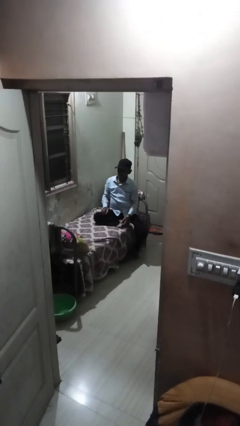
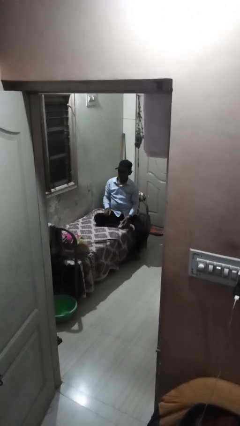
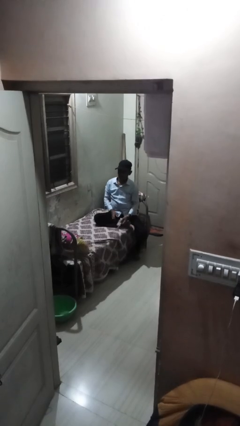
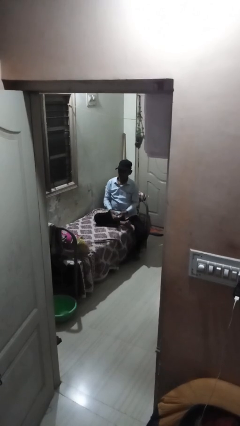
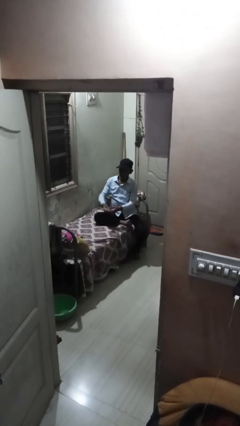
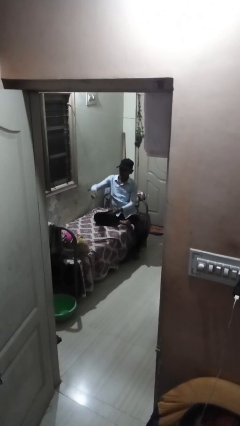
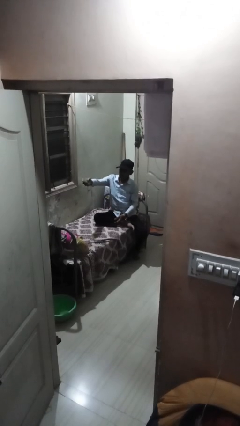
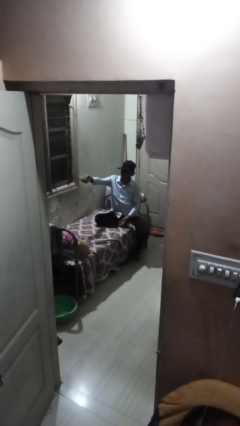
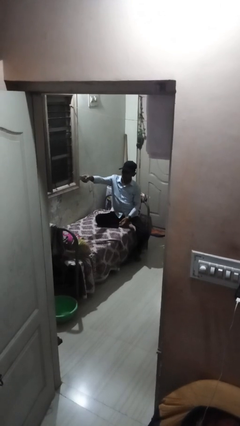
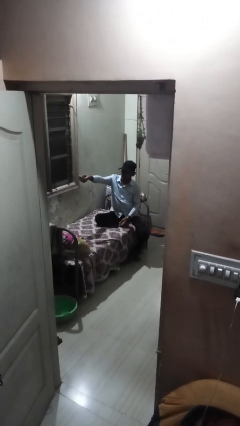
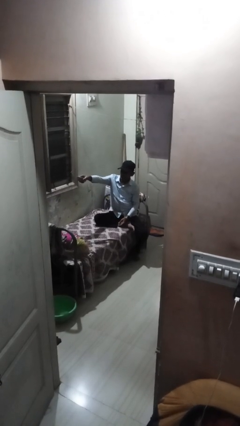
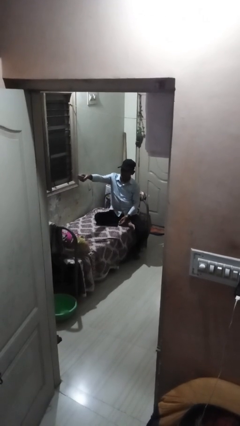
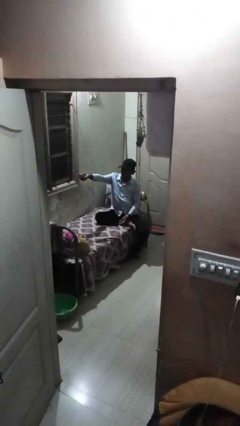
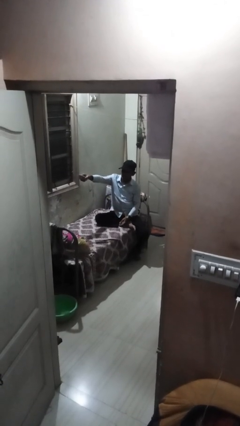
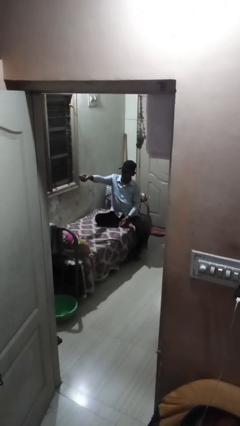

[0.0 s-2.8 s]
person uses television remote

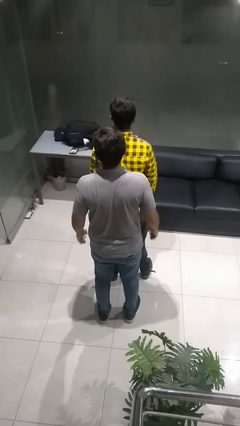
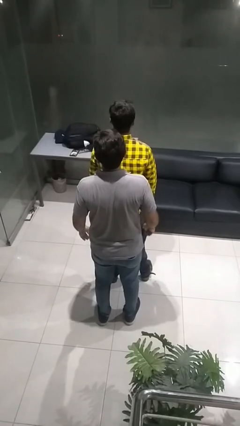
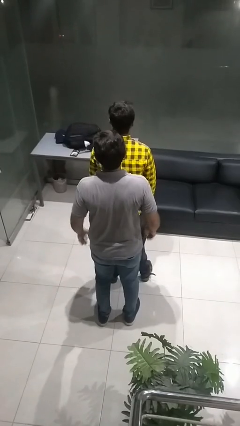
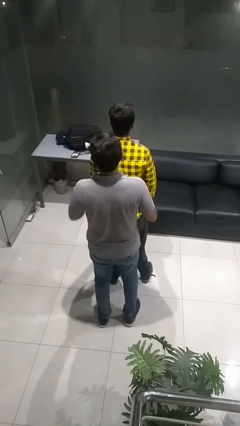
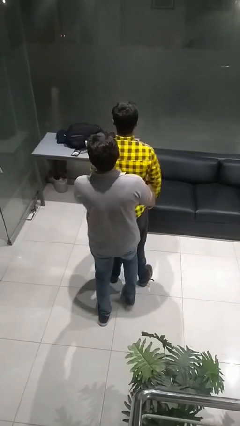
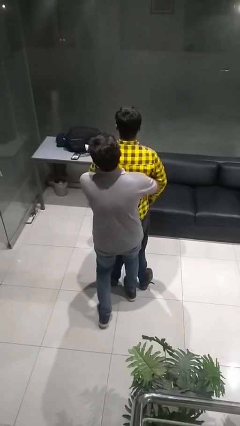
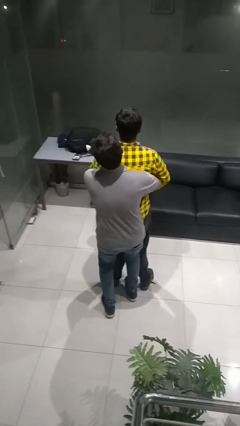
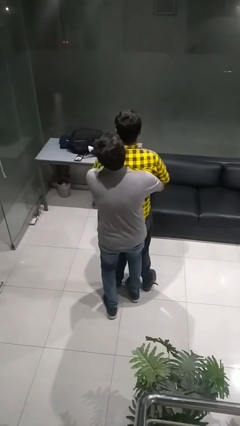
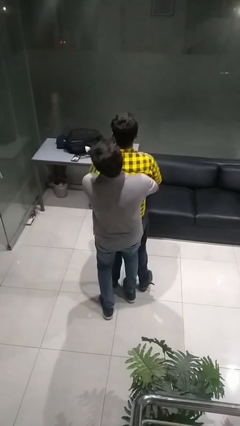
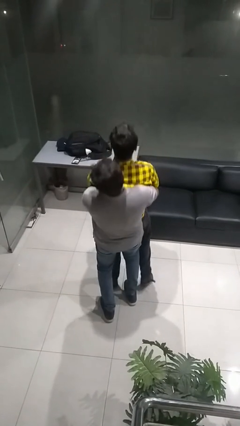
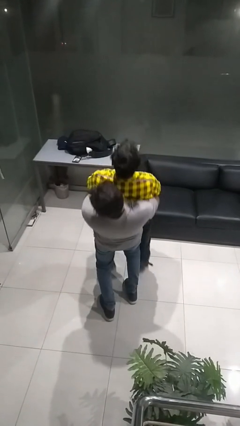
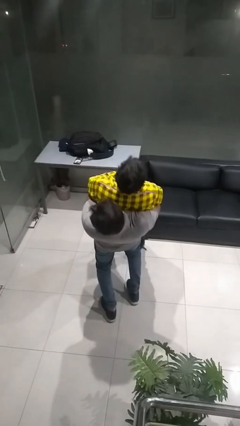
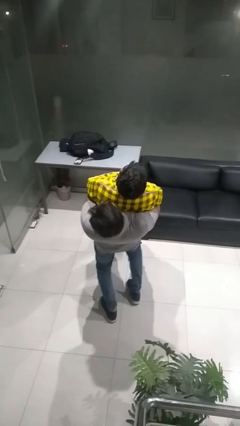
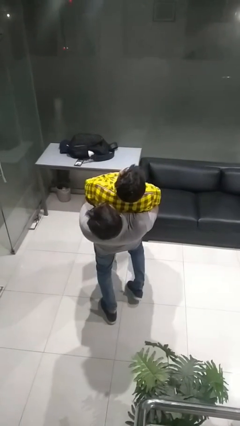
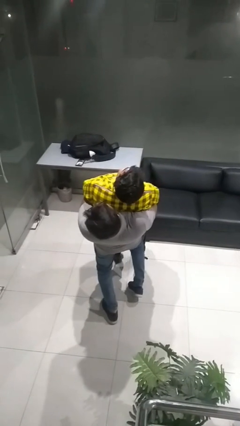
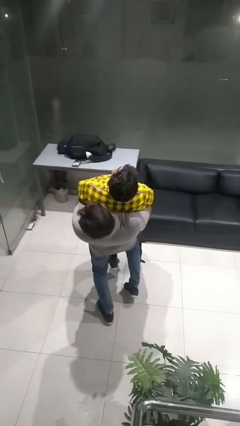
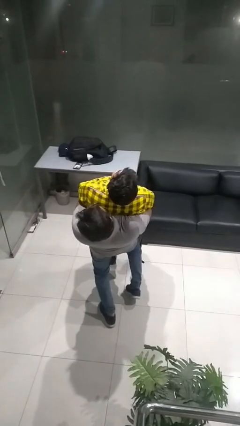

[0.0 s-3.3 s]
person picks up person

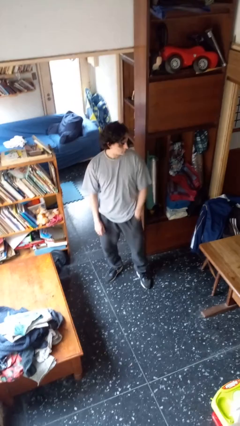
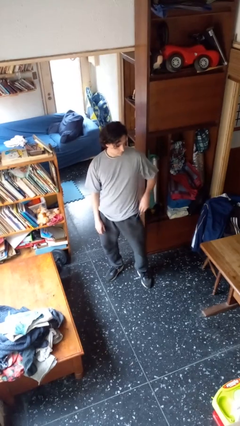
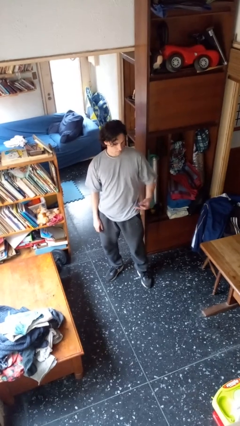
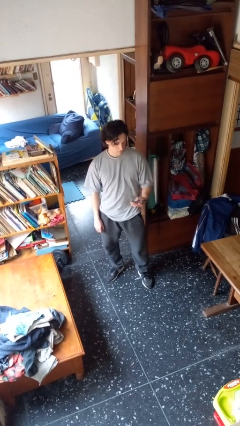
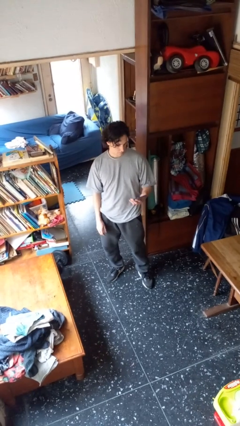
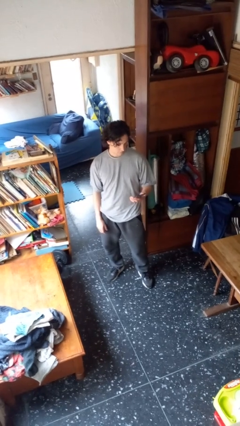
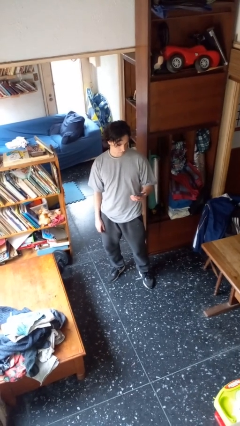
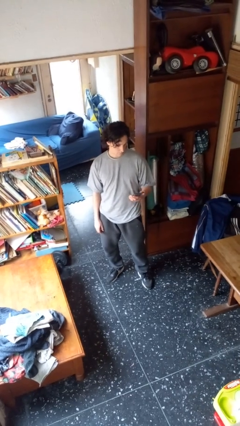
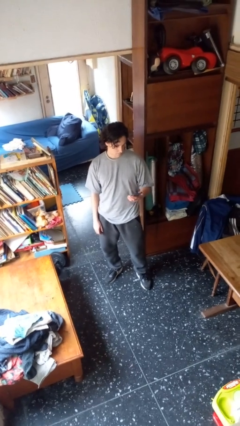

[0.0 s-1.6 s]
person takes phone from pocket

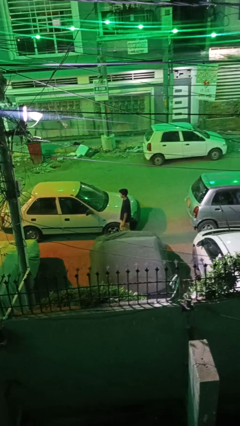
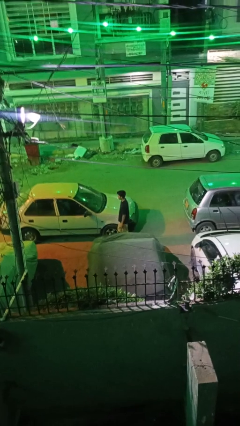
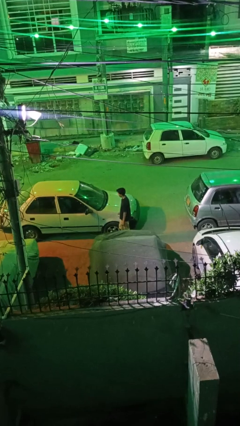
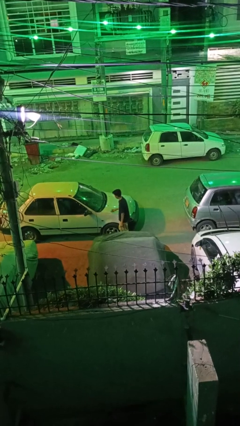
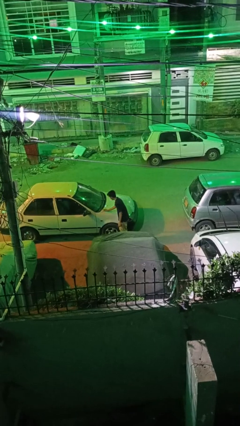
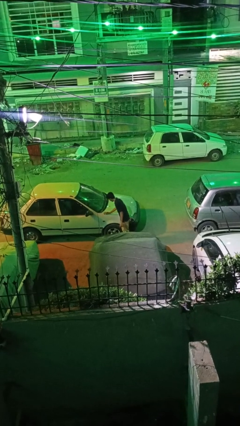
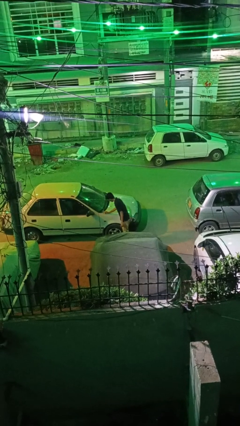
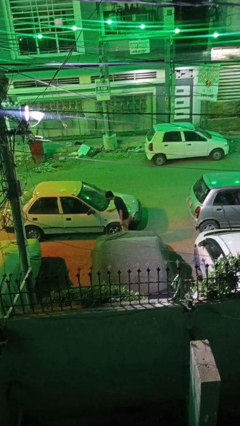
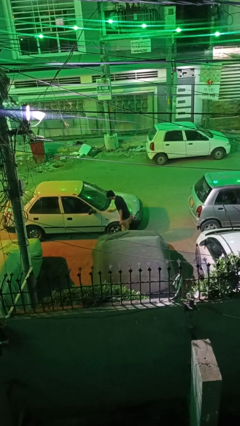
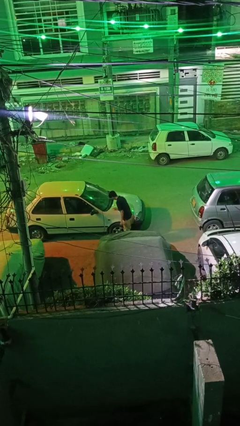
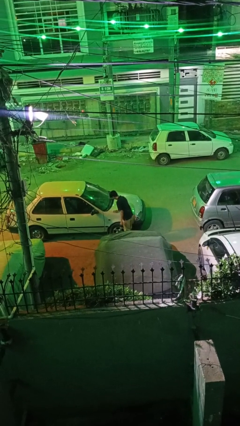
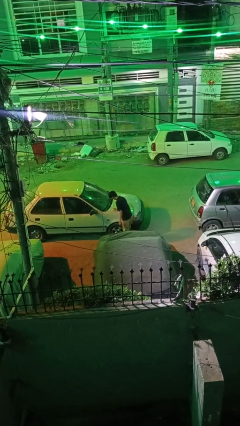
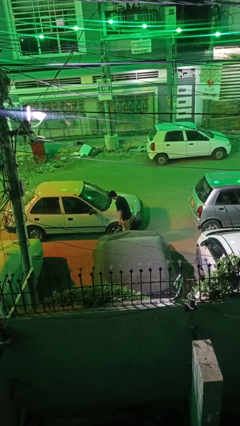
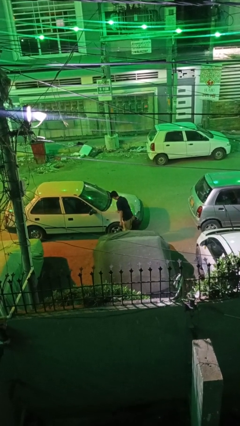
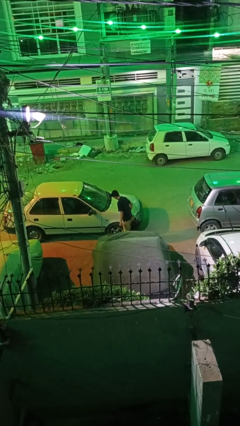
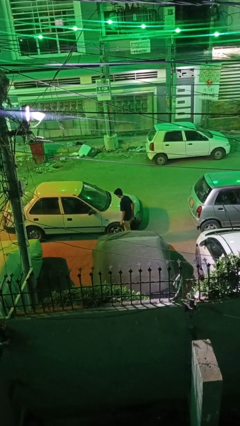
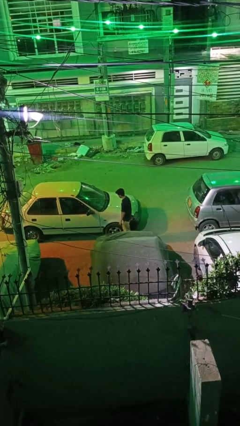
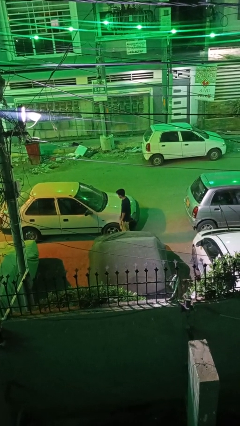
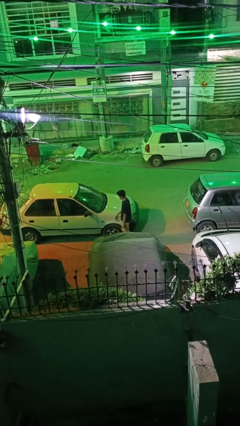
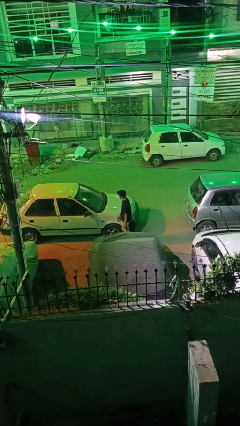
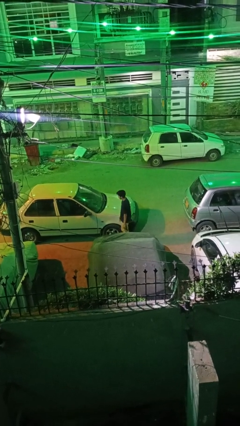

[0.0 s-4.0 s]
person polishes car with rag

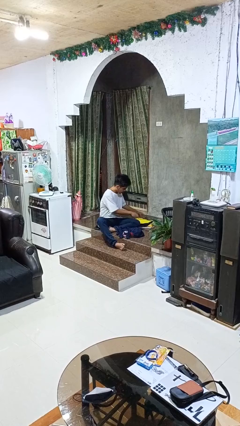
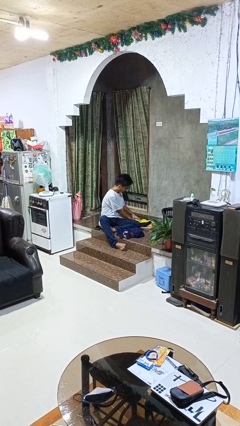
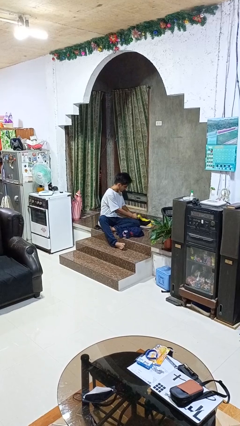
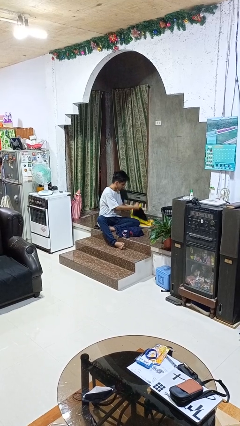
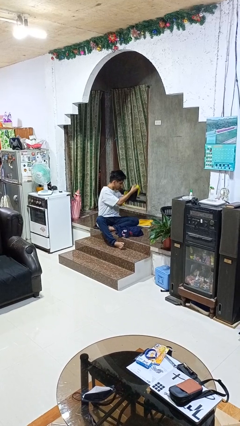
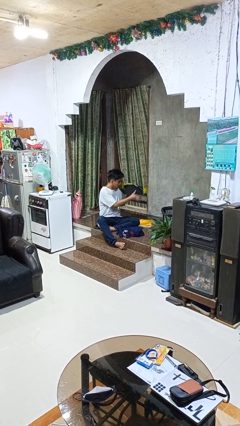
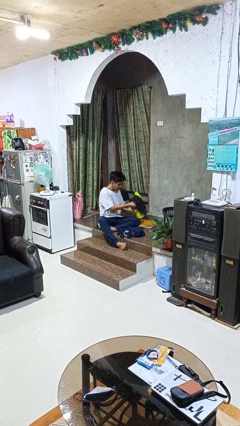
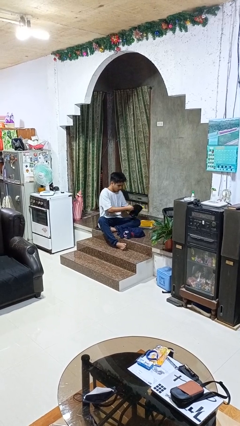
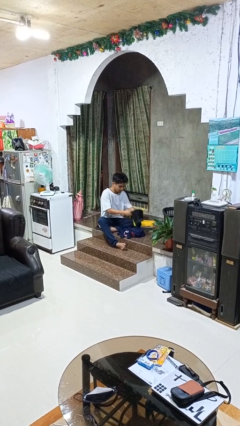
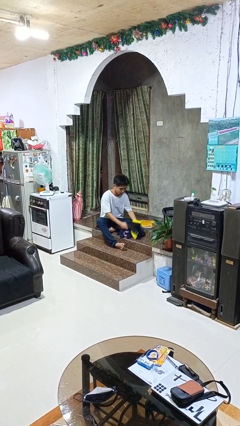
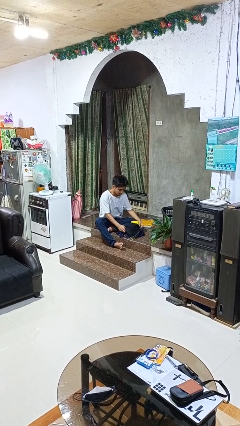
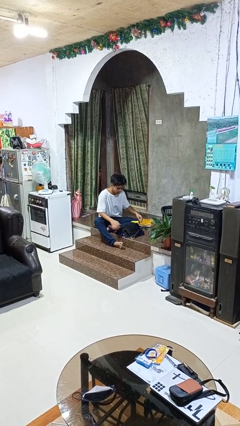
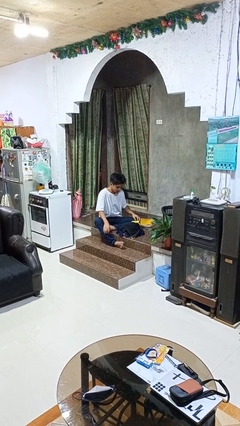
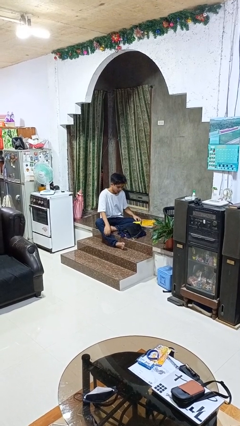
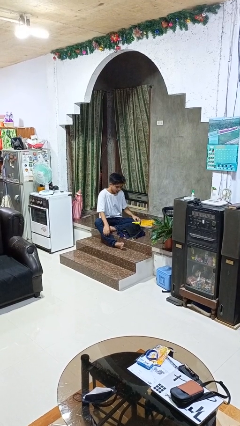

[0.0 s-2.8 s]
person folds shirt

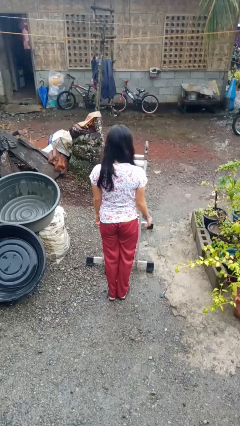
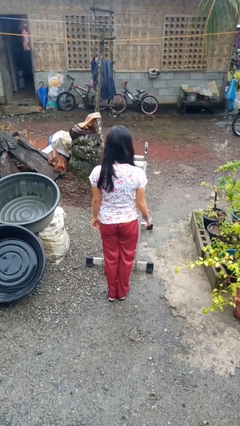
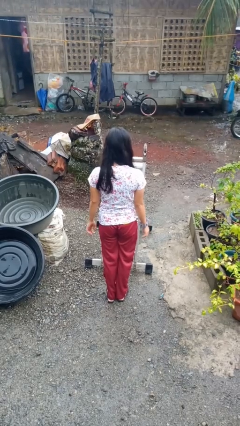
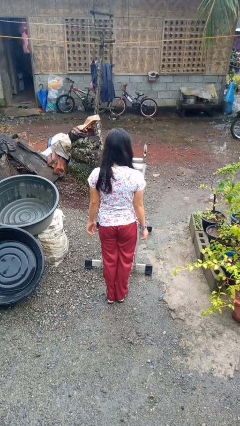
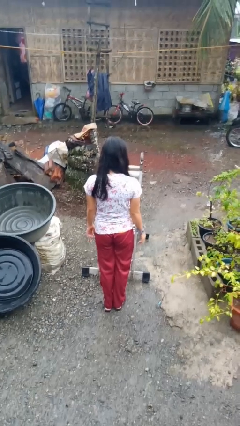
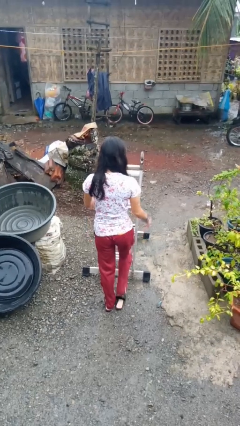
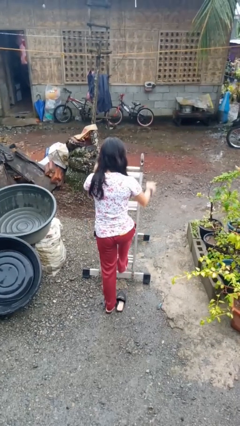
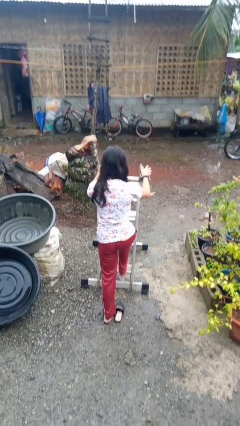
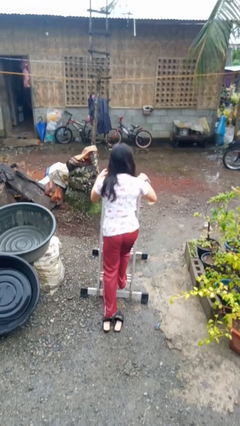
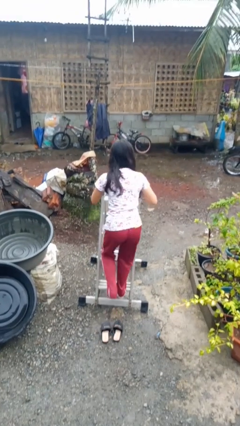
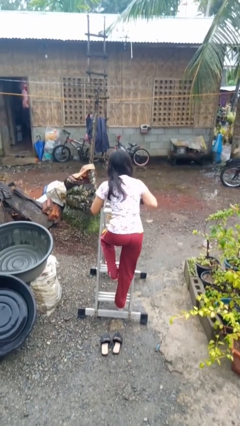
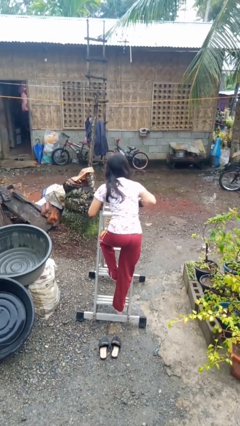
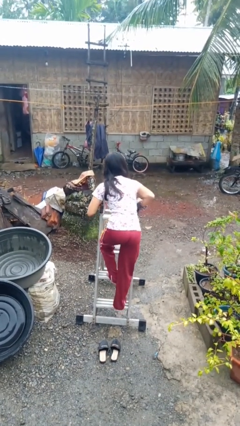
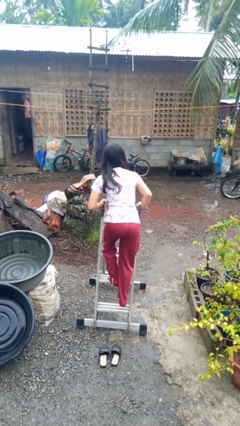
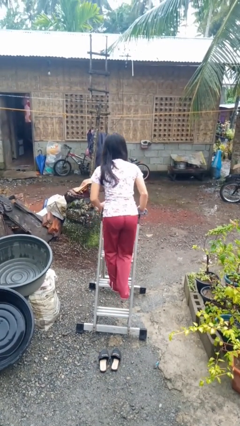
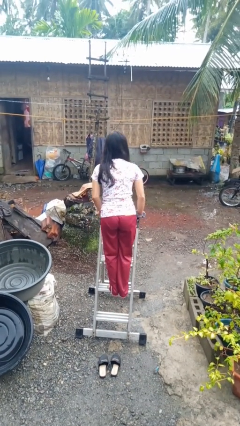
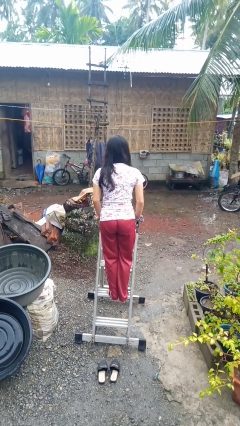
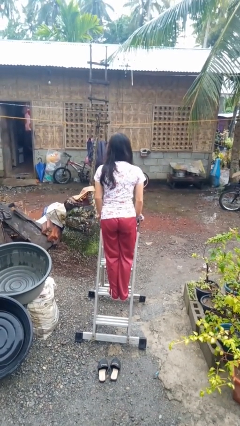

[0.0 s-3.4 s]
person climbs up ladder
